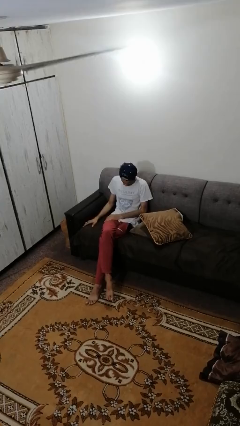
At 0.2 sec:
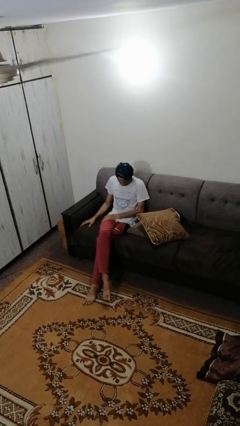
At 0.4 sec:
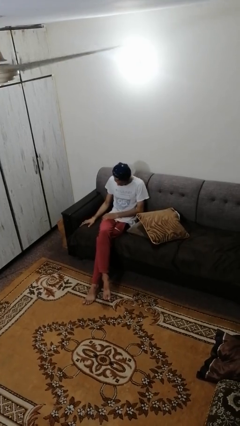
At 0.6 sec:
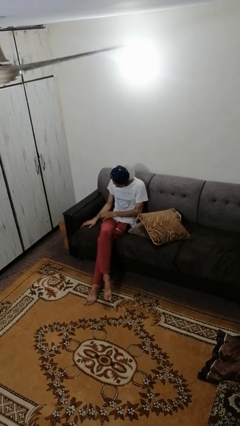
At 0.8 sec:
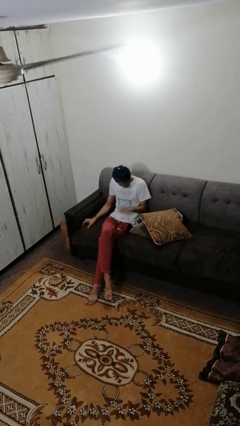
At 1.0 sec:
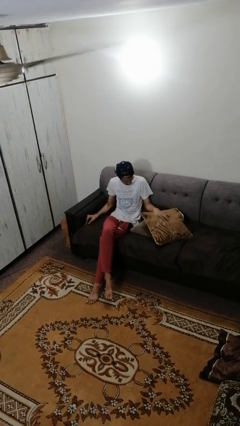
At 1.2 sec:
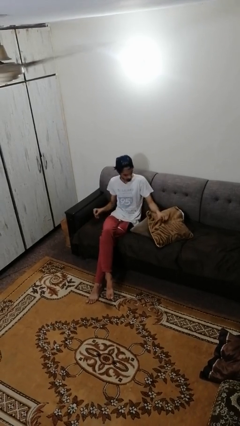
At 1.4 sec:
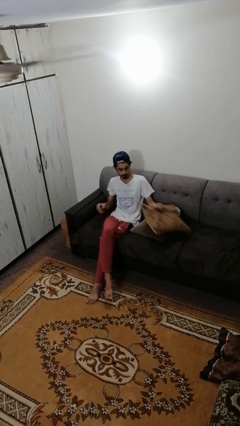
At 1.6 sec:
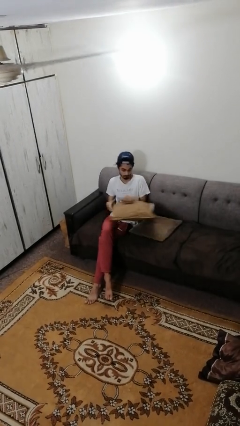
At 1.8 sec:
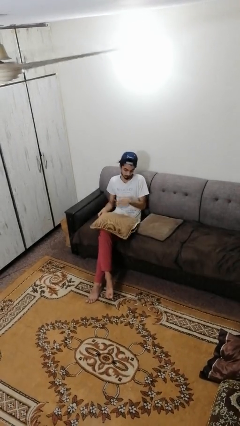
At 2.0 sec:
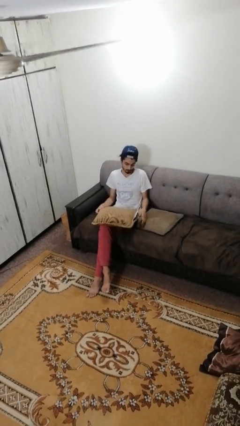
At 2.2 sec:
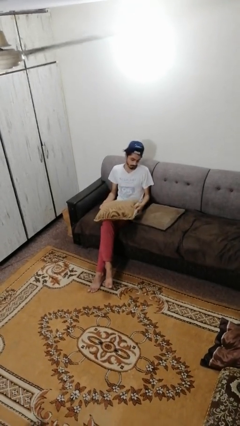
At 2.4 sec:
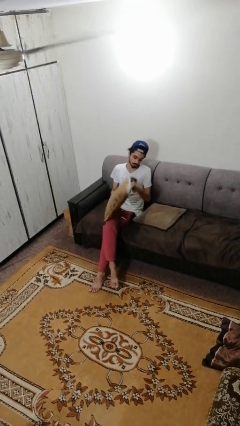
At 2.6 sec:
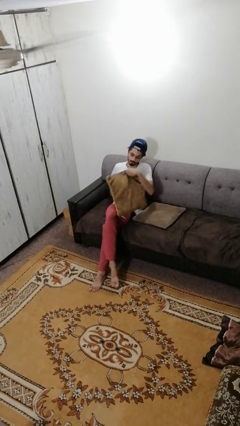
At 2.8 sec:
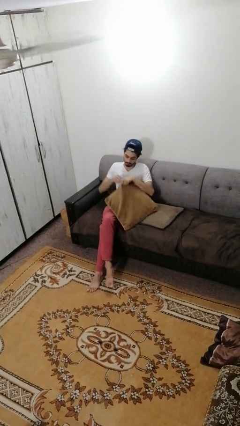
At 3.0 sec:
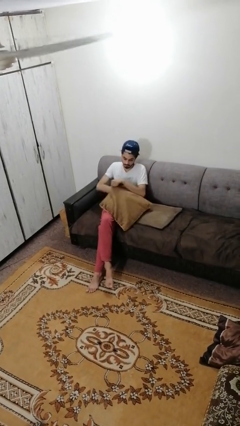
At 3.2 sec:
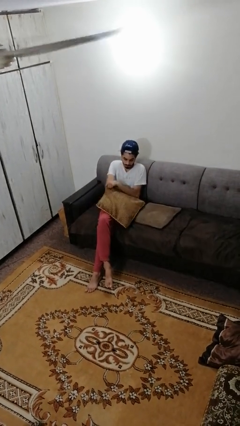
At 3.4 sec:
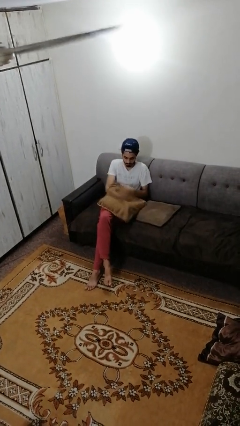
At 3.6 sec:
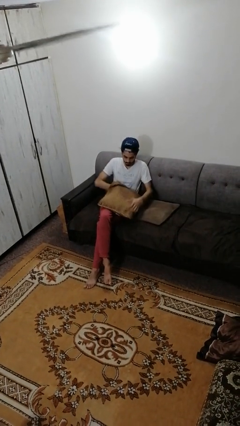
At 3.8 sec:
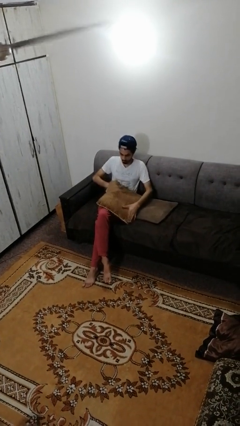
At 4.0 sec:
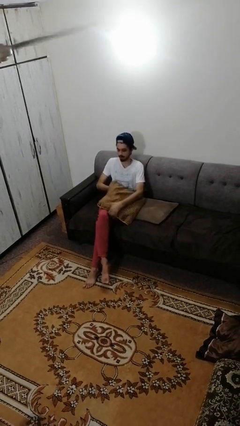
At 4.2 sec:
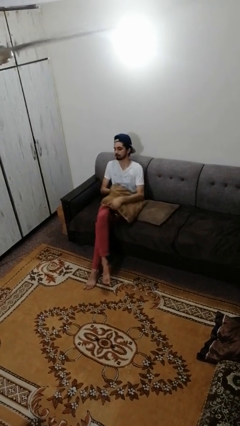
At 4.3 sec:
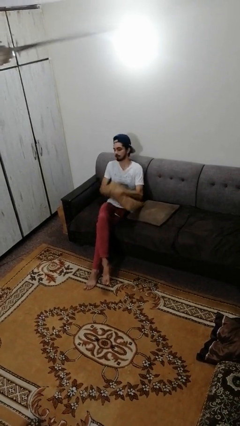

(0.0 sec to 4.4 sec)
person searches in couch

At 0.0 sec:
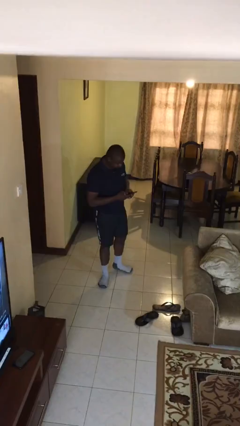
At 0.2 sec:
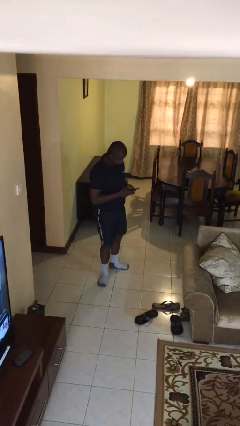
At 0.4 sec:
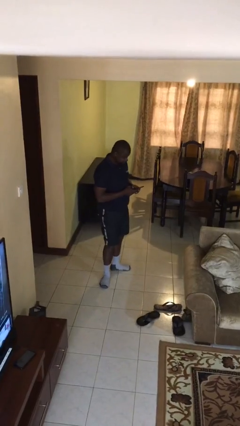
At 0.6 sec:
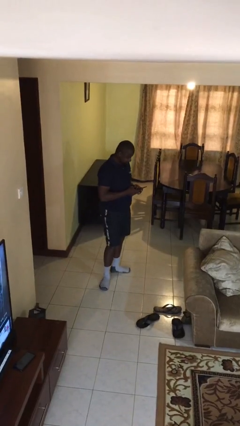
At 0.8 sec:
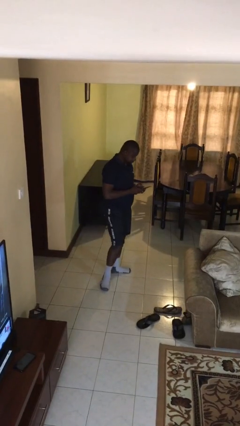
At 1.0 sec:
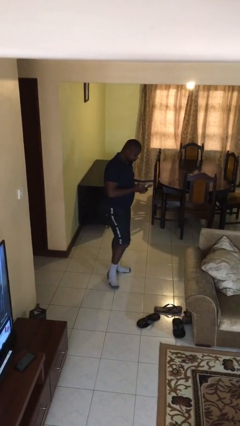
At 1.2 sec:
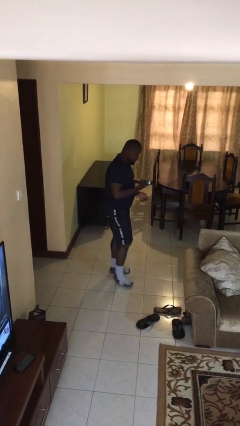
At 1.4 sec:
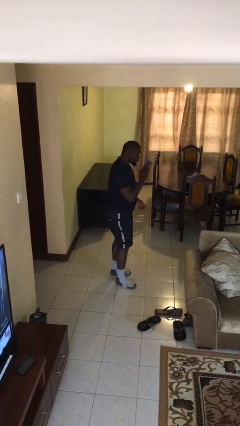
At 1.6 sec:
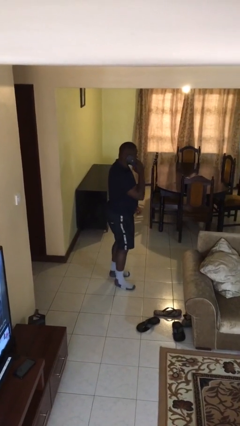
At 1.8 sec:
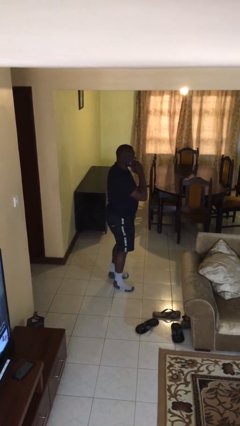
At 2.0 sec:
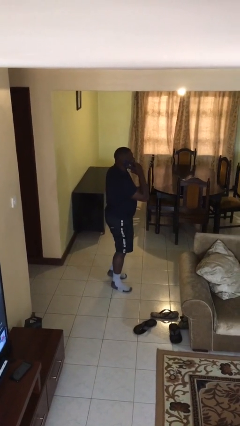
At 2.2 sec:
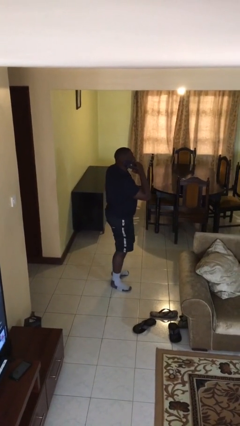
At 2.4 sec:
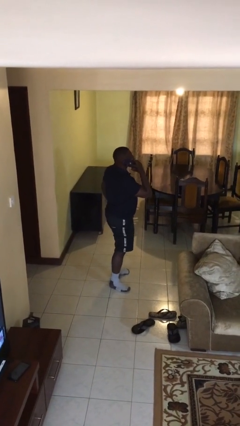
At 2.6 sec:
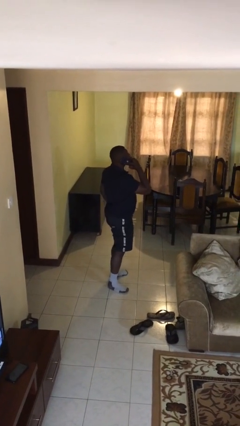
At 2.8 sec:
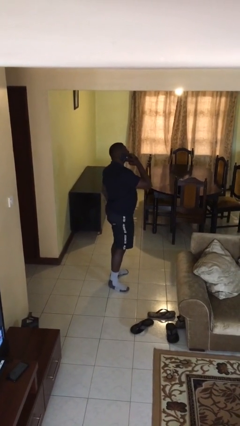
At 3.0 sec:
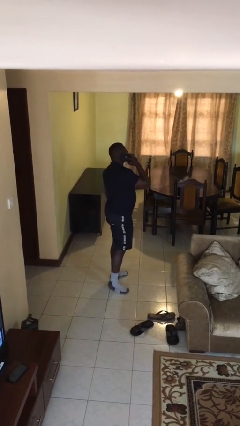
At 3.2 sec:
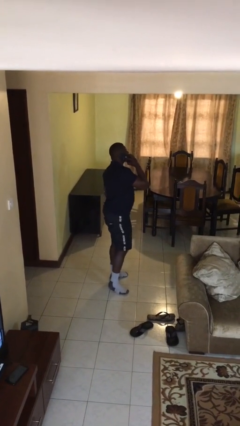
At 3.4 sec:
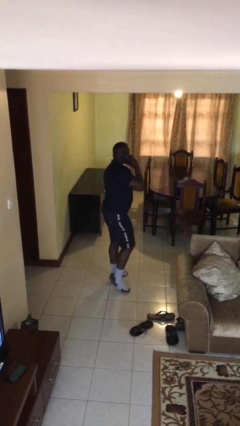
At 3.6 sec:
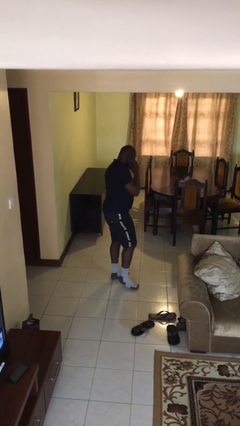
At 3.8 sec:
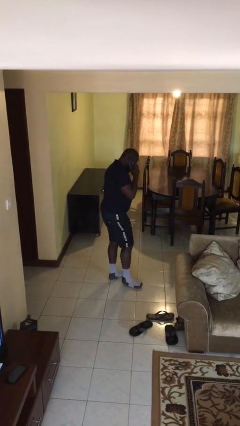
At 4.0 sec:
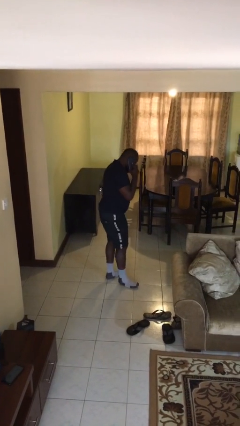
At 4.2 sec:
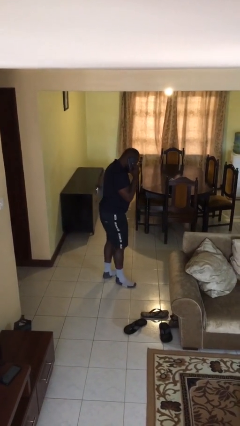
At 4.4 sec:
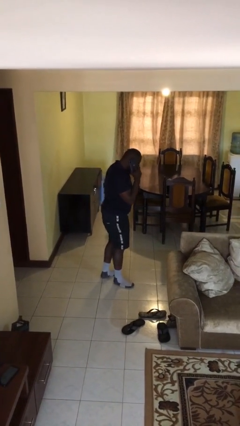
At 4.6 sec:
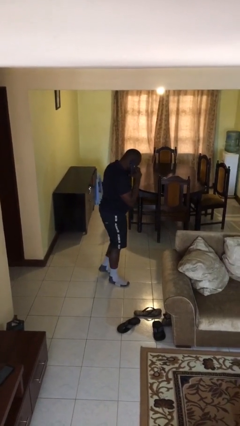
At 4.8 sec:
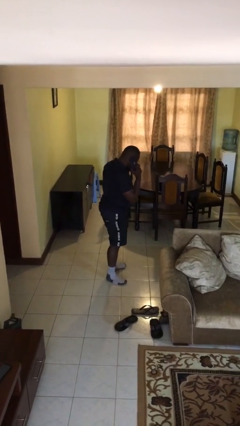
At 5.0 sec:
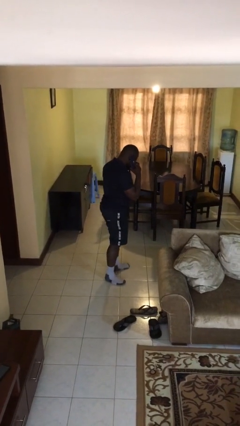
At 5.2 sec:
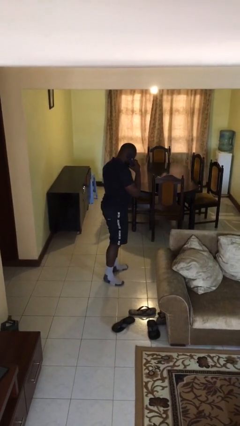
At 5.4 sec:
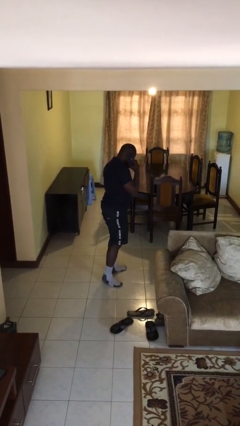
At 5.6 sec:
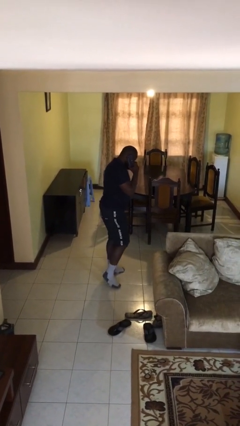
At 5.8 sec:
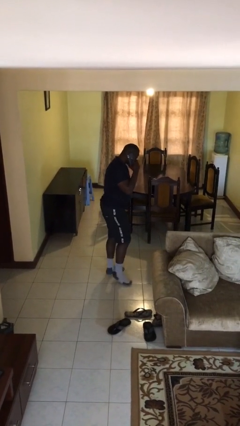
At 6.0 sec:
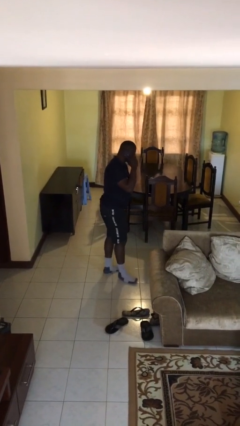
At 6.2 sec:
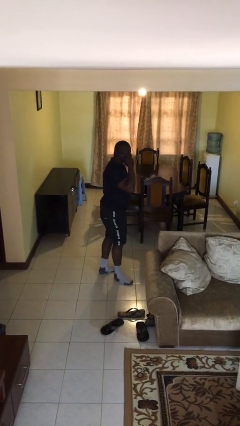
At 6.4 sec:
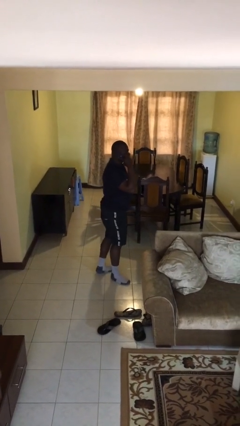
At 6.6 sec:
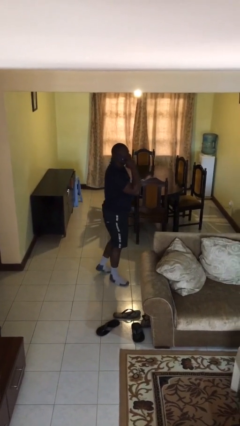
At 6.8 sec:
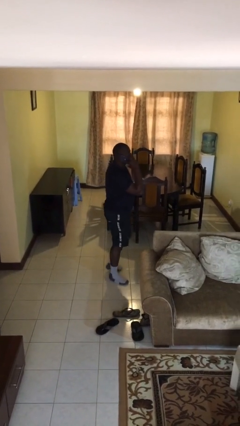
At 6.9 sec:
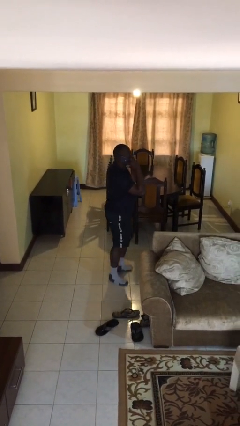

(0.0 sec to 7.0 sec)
person talks on phone

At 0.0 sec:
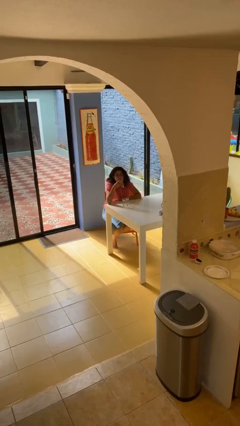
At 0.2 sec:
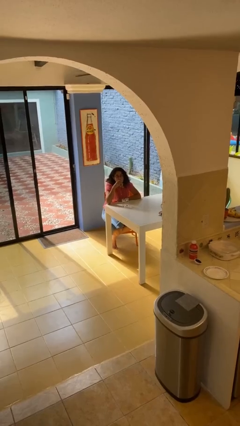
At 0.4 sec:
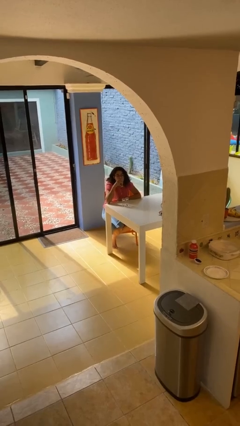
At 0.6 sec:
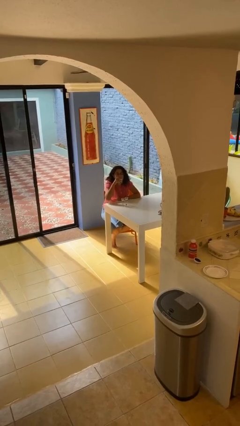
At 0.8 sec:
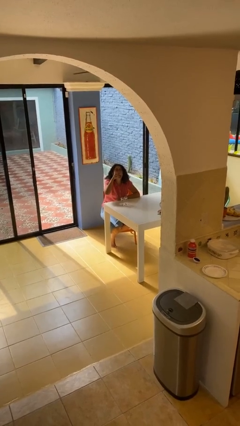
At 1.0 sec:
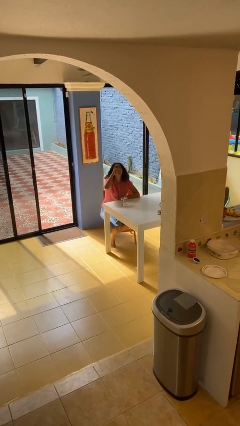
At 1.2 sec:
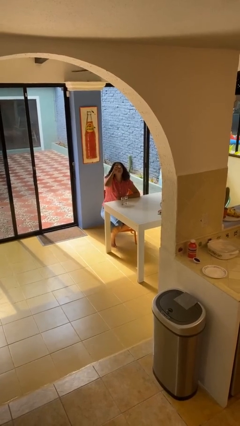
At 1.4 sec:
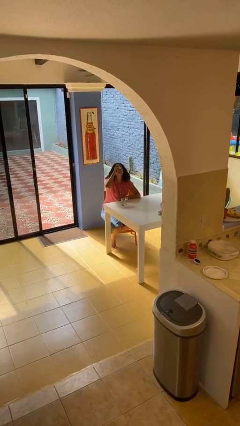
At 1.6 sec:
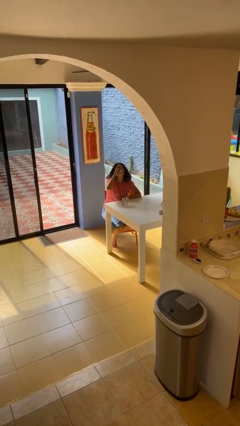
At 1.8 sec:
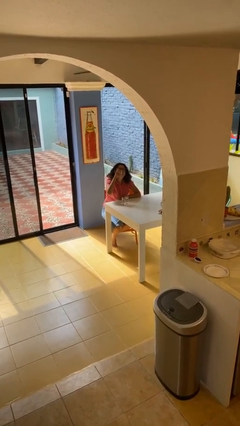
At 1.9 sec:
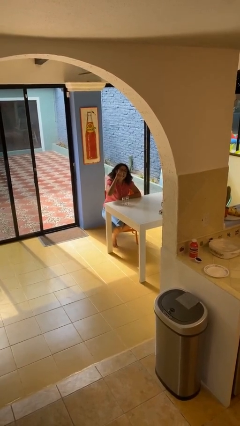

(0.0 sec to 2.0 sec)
person drinks from shotglass

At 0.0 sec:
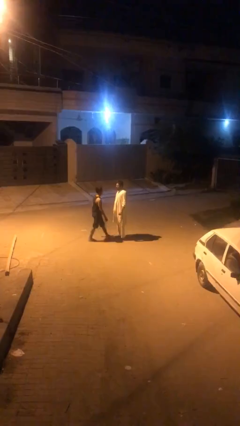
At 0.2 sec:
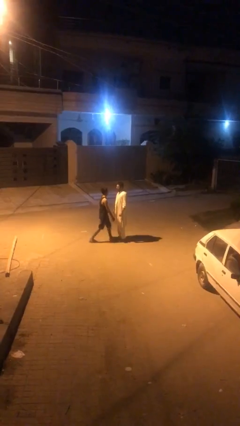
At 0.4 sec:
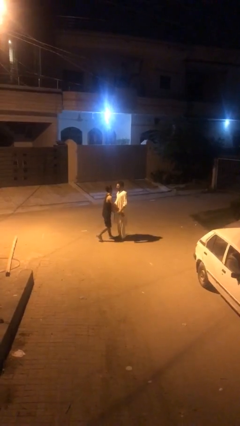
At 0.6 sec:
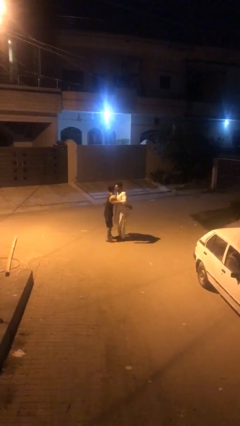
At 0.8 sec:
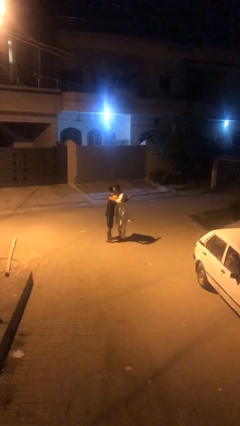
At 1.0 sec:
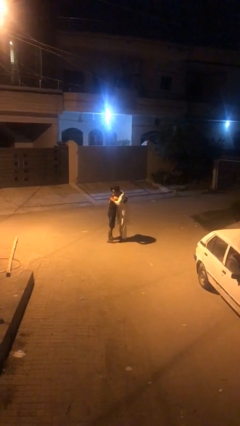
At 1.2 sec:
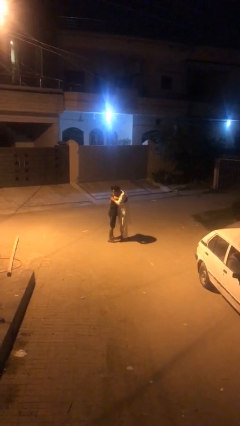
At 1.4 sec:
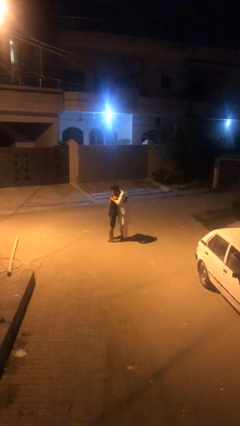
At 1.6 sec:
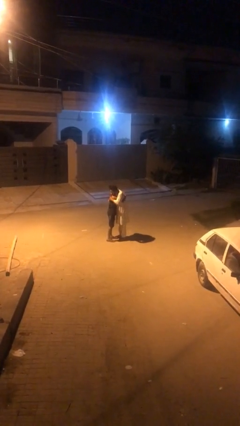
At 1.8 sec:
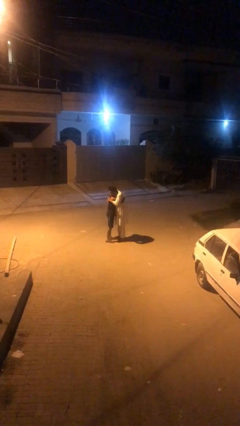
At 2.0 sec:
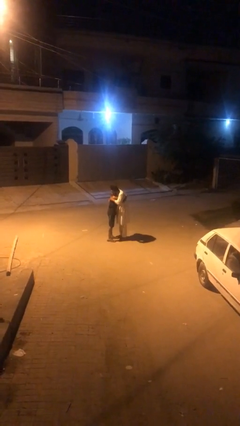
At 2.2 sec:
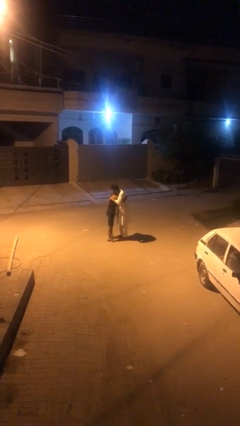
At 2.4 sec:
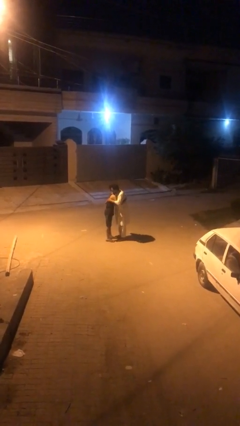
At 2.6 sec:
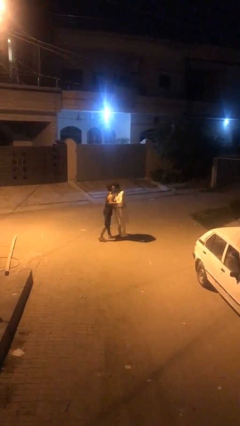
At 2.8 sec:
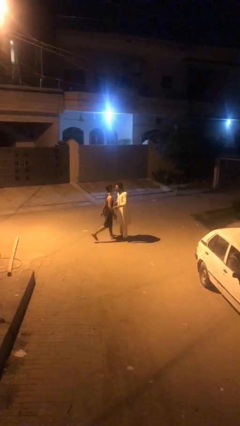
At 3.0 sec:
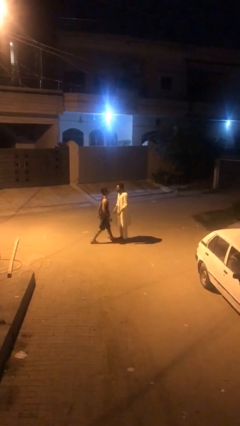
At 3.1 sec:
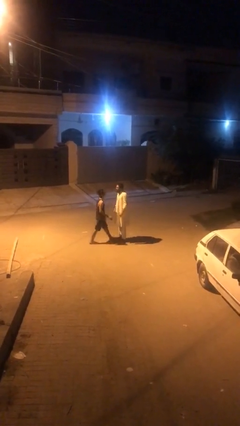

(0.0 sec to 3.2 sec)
person embraces person

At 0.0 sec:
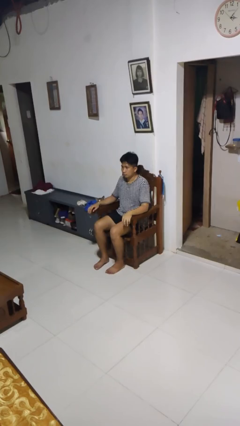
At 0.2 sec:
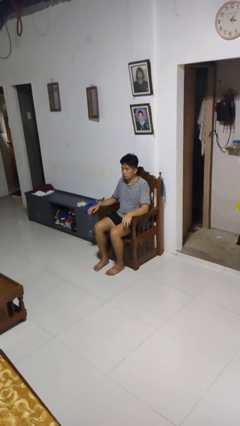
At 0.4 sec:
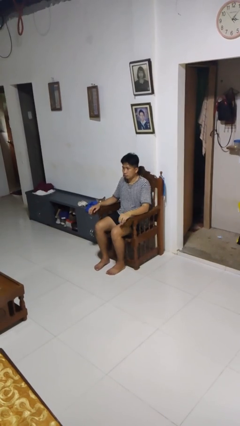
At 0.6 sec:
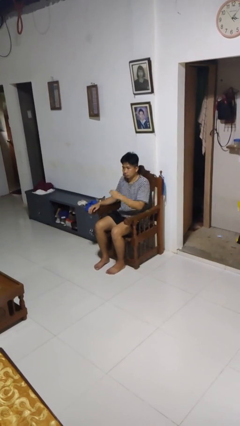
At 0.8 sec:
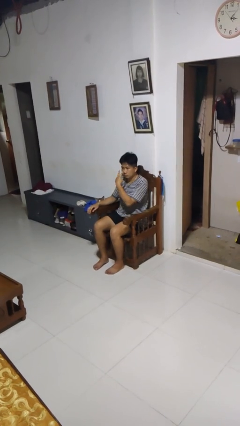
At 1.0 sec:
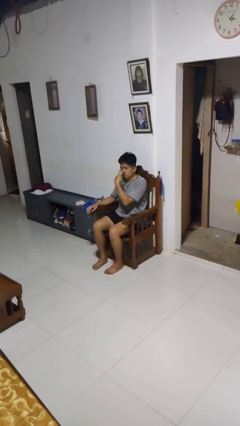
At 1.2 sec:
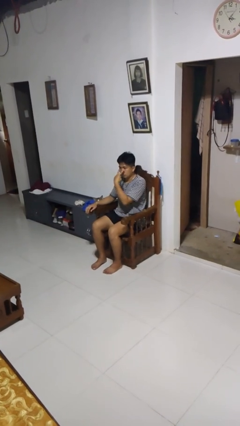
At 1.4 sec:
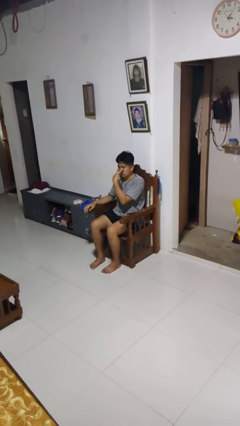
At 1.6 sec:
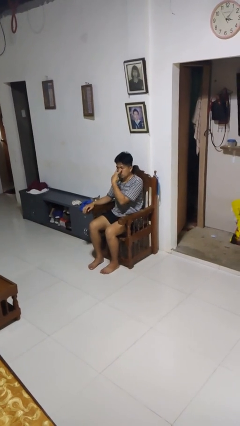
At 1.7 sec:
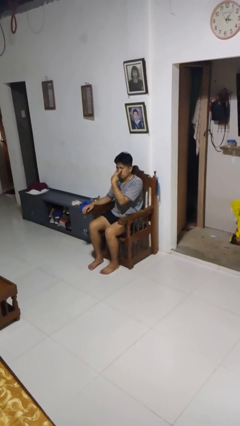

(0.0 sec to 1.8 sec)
person gestures watch closely
